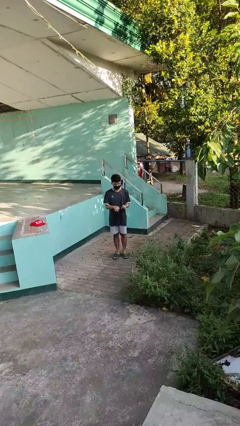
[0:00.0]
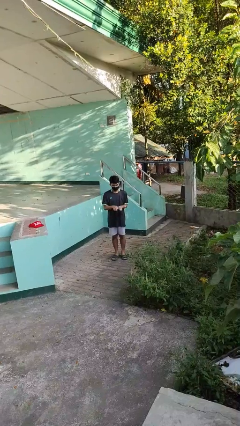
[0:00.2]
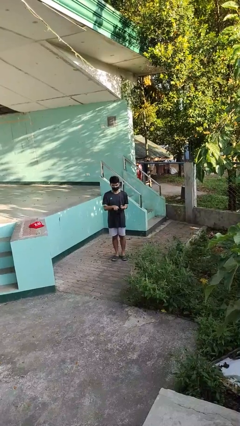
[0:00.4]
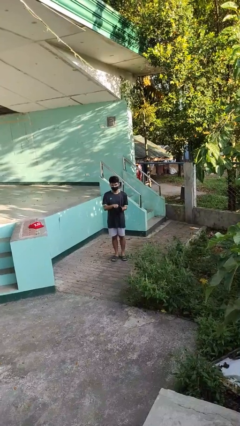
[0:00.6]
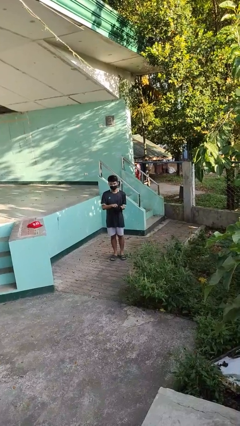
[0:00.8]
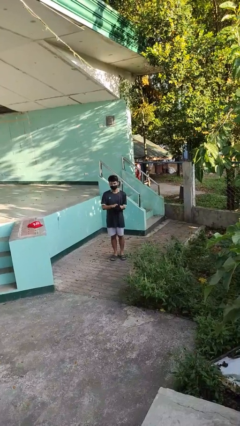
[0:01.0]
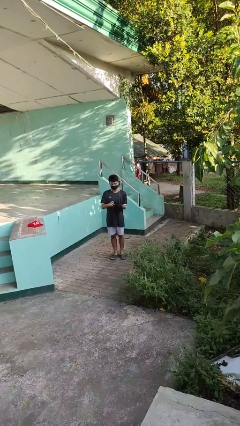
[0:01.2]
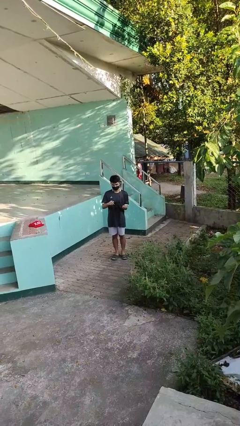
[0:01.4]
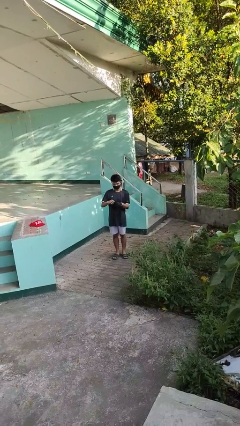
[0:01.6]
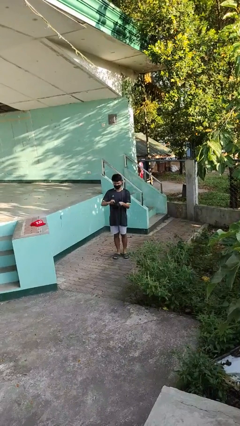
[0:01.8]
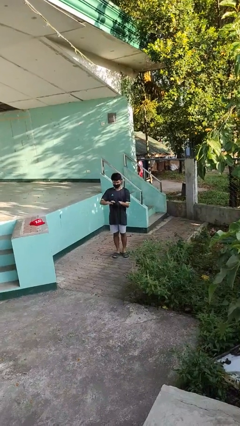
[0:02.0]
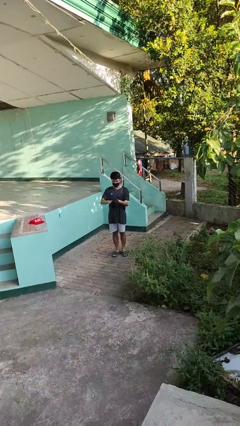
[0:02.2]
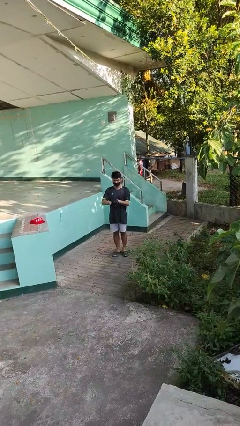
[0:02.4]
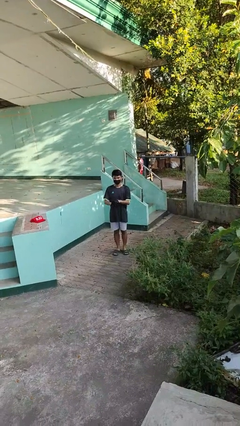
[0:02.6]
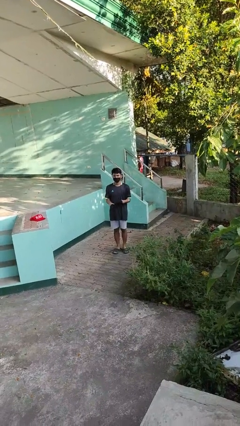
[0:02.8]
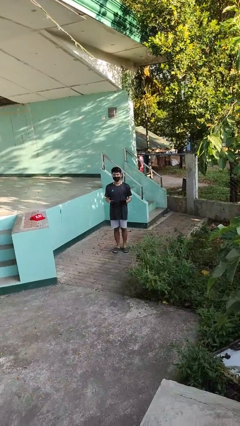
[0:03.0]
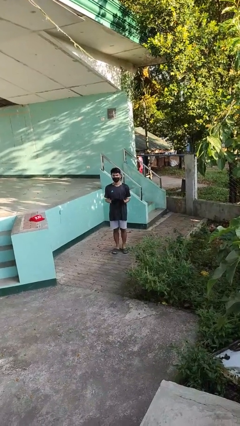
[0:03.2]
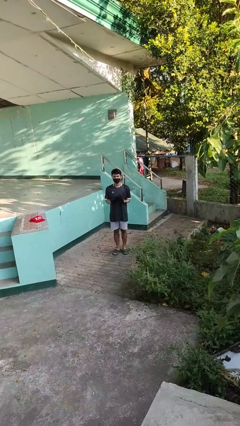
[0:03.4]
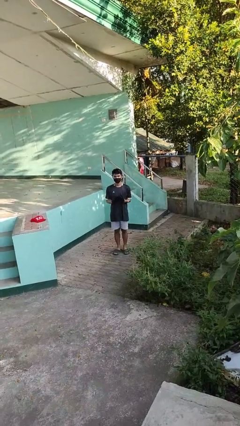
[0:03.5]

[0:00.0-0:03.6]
person puts on gloves

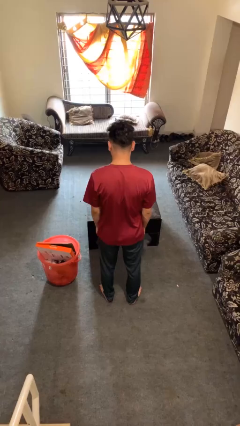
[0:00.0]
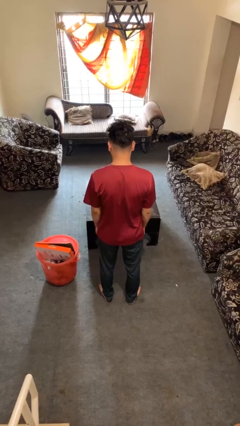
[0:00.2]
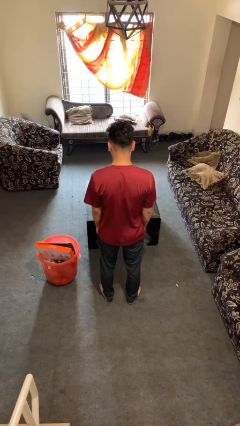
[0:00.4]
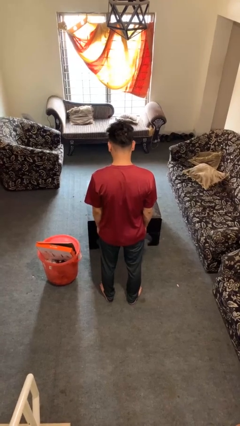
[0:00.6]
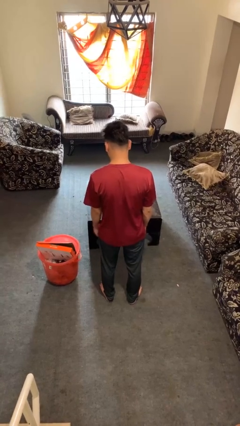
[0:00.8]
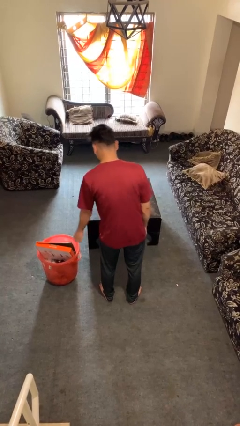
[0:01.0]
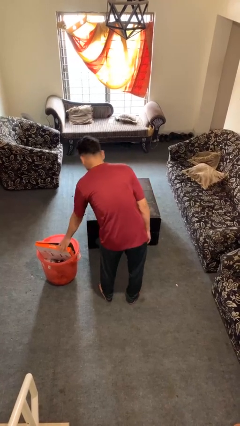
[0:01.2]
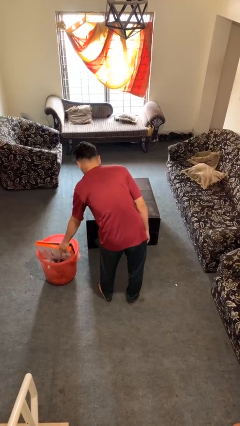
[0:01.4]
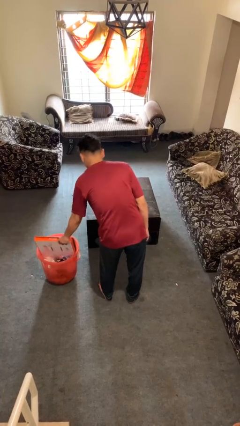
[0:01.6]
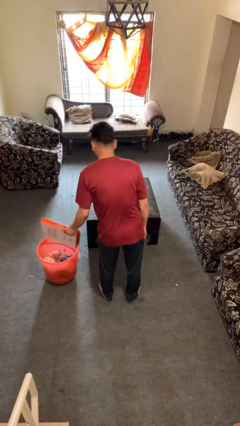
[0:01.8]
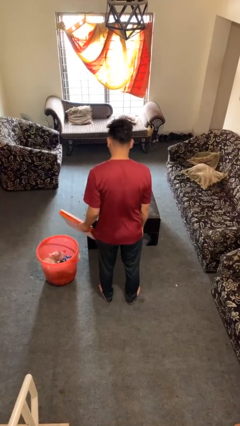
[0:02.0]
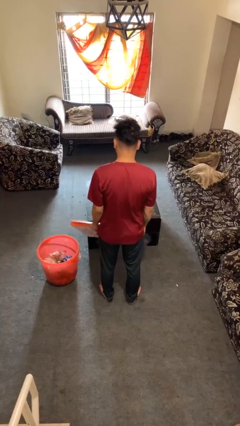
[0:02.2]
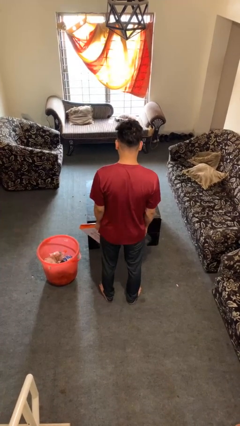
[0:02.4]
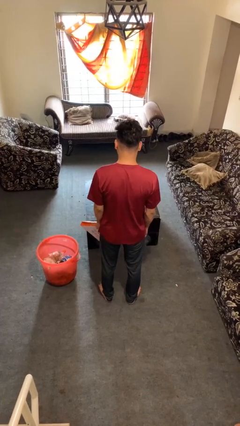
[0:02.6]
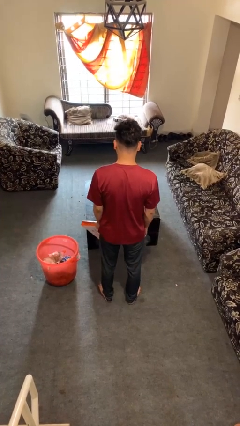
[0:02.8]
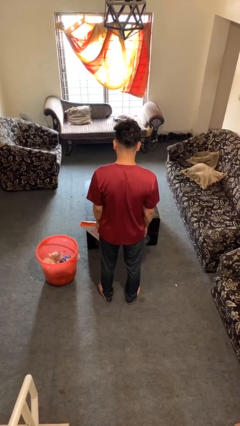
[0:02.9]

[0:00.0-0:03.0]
person takes object from basket

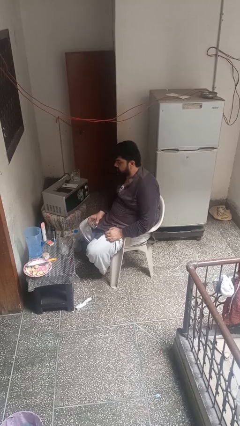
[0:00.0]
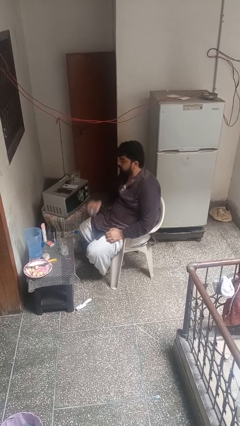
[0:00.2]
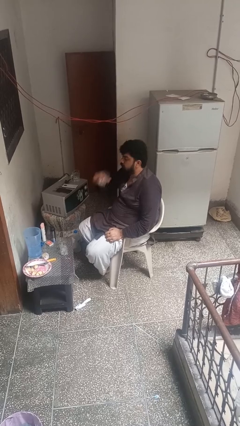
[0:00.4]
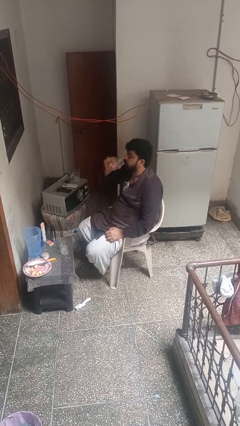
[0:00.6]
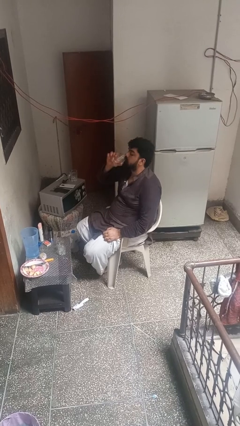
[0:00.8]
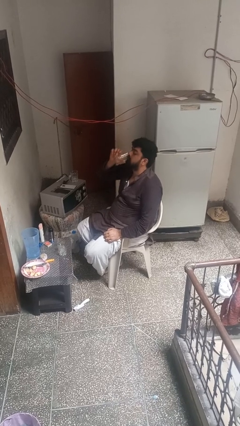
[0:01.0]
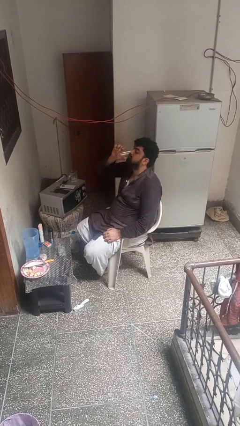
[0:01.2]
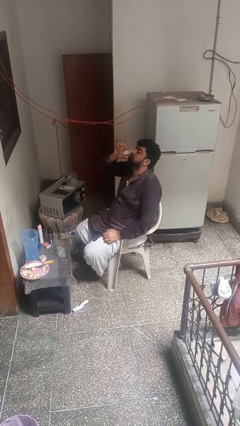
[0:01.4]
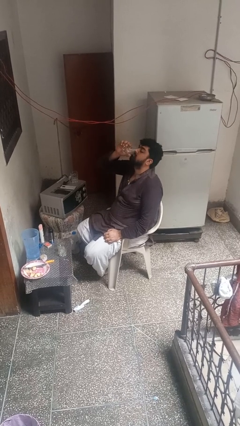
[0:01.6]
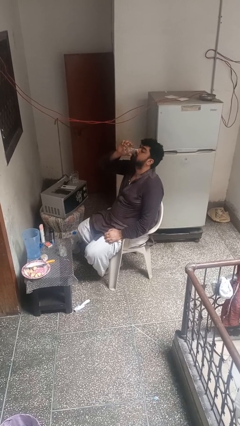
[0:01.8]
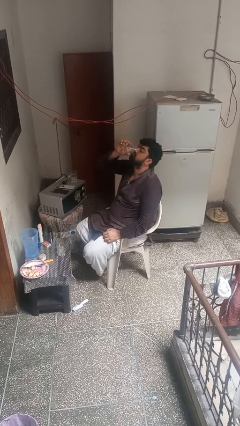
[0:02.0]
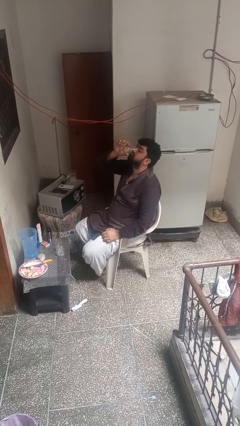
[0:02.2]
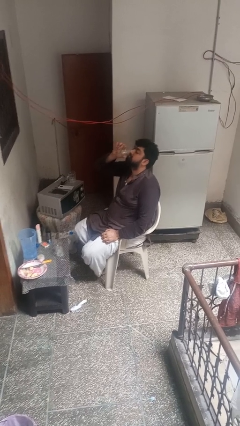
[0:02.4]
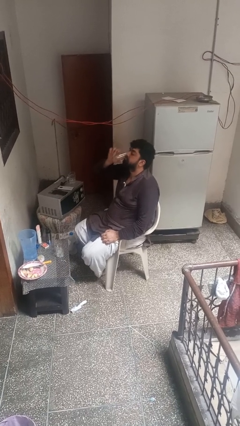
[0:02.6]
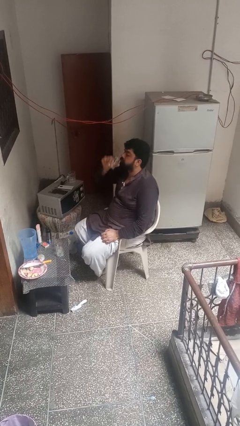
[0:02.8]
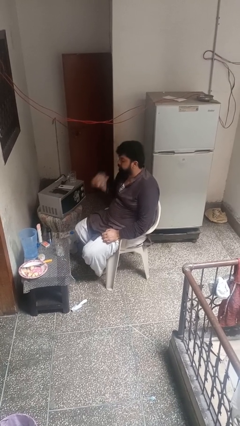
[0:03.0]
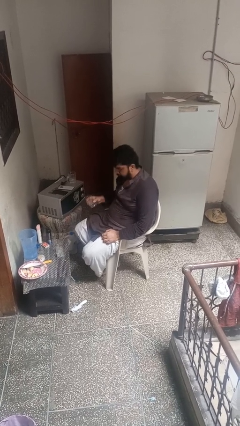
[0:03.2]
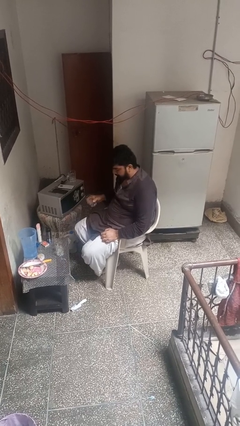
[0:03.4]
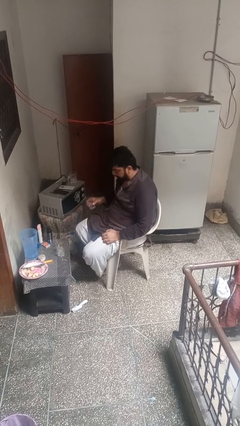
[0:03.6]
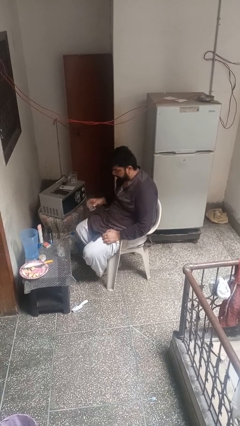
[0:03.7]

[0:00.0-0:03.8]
person drinks from shotglass

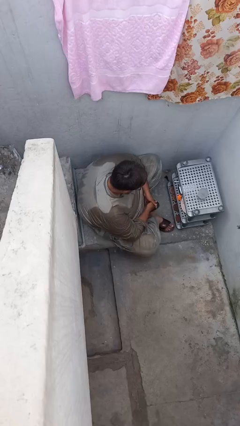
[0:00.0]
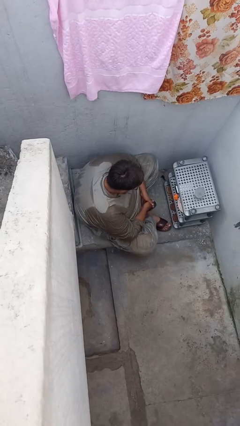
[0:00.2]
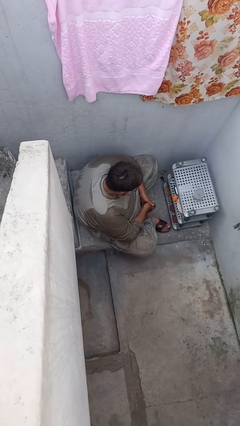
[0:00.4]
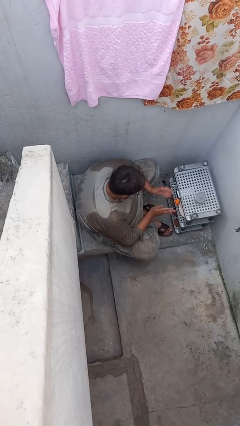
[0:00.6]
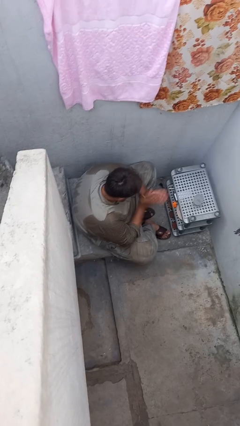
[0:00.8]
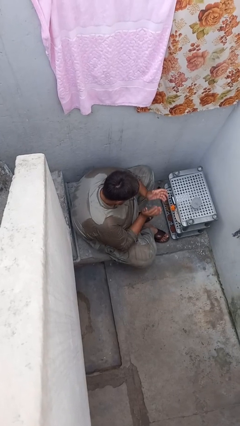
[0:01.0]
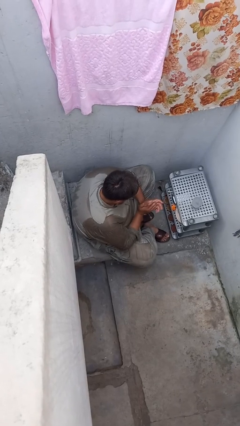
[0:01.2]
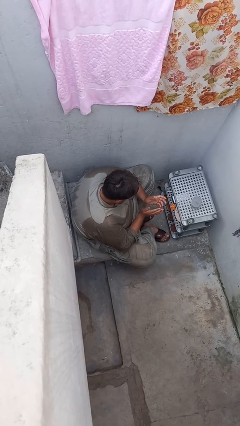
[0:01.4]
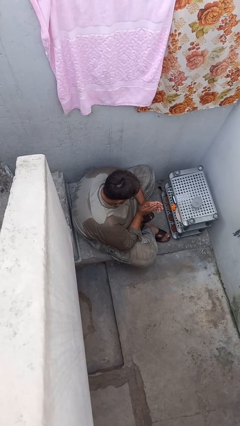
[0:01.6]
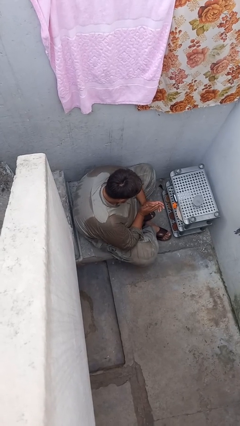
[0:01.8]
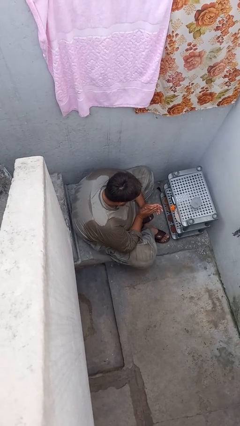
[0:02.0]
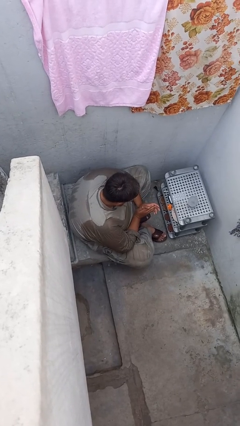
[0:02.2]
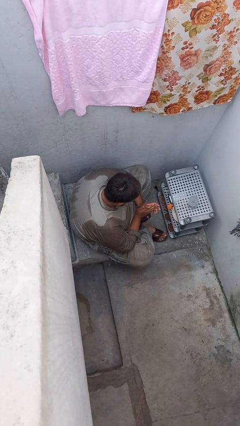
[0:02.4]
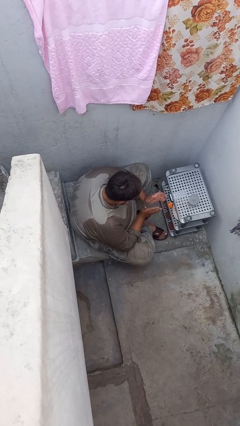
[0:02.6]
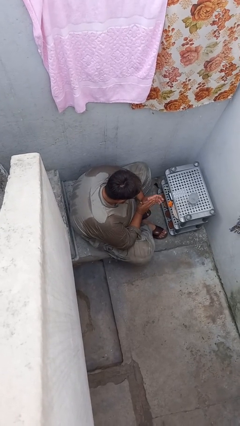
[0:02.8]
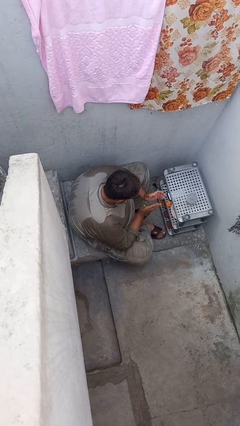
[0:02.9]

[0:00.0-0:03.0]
person claps hands

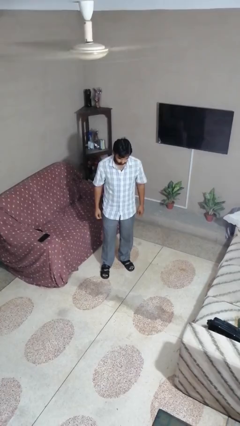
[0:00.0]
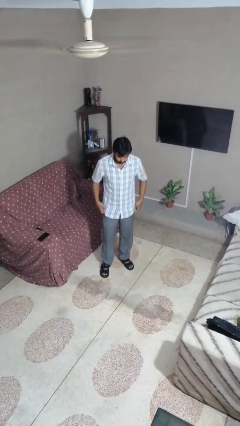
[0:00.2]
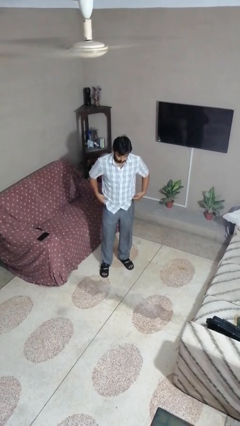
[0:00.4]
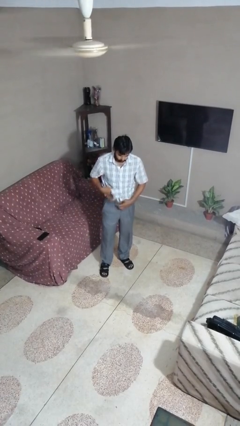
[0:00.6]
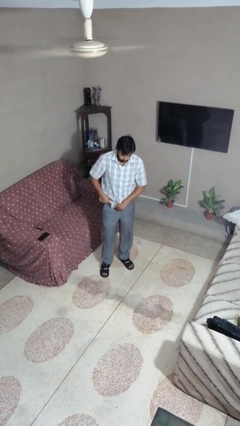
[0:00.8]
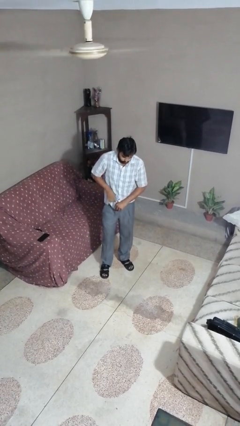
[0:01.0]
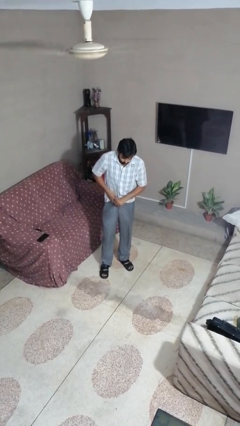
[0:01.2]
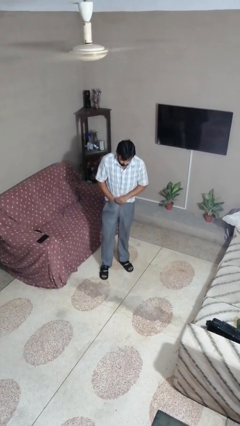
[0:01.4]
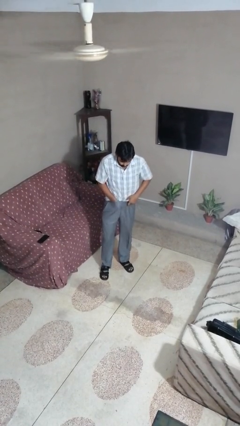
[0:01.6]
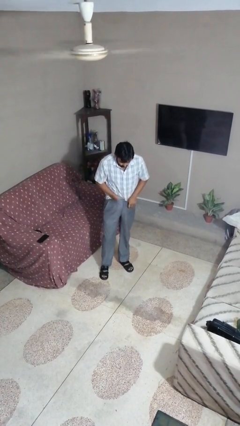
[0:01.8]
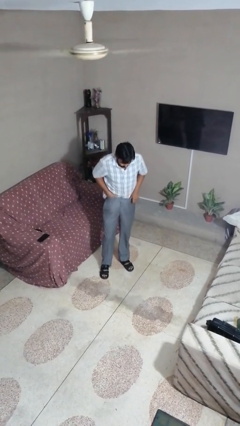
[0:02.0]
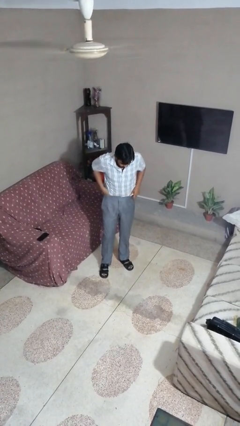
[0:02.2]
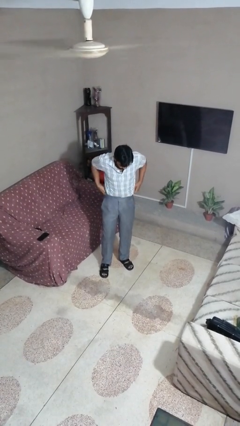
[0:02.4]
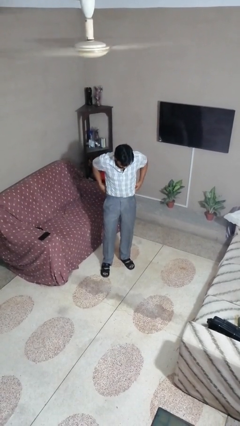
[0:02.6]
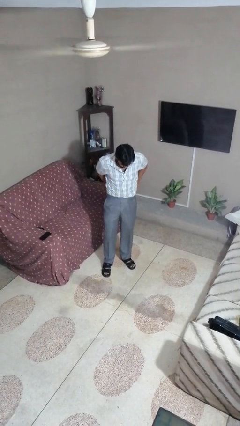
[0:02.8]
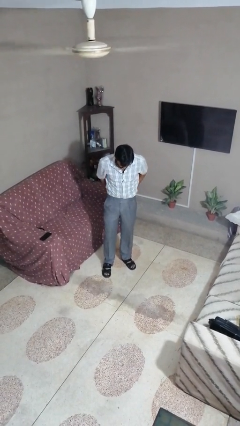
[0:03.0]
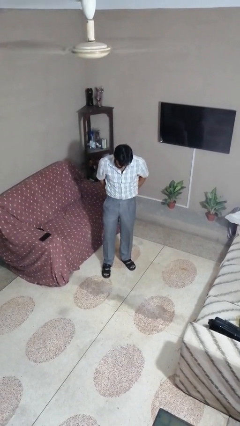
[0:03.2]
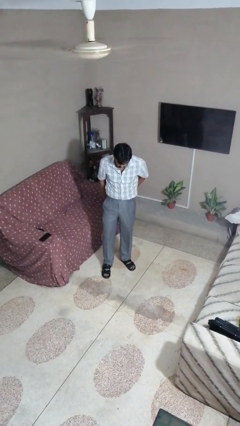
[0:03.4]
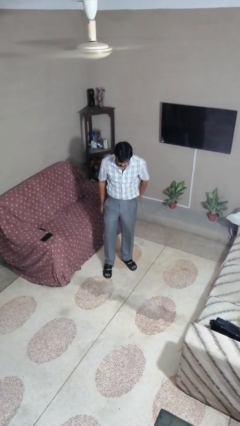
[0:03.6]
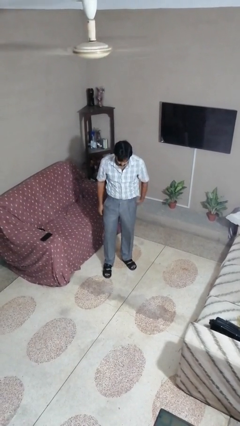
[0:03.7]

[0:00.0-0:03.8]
person tucks in shirt

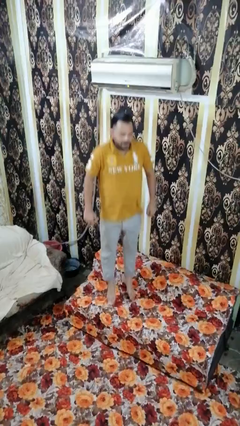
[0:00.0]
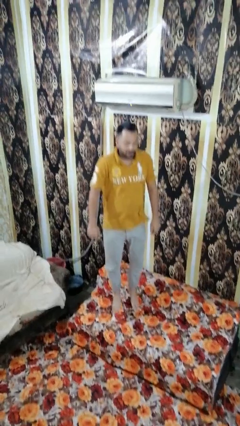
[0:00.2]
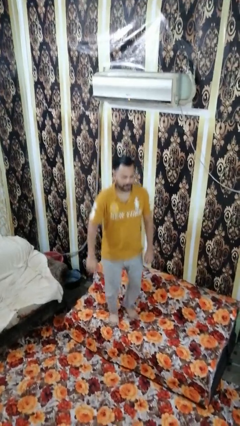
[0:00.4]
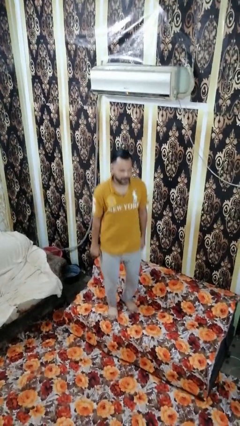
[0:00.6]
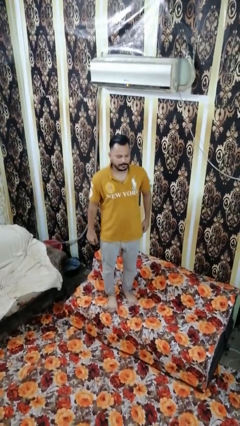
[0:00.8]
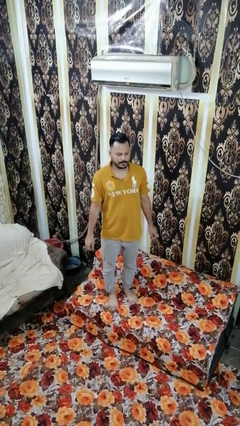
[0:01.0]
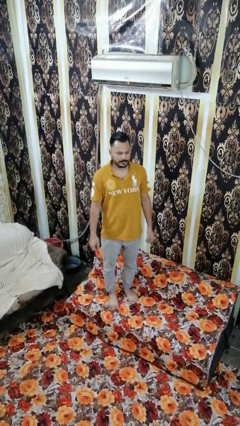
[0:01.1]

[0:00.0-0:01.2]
person jumps on couch
